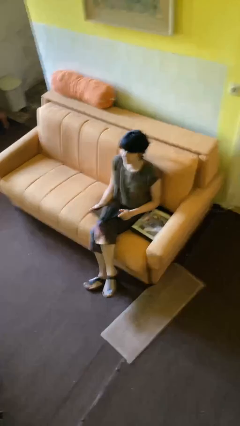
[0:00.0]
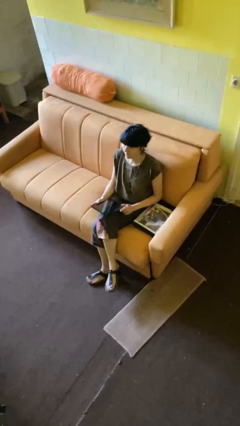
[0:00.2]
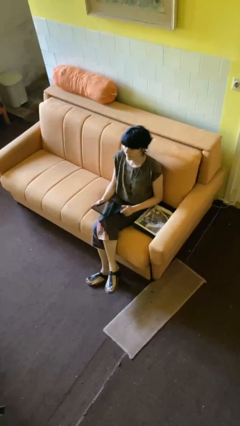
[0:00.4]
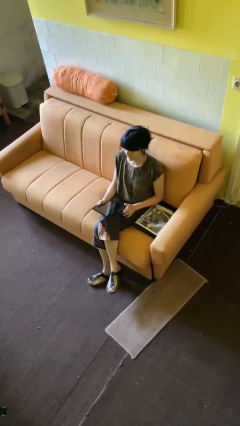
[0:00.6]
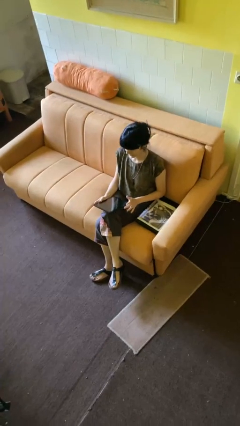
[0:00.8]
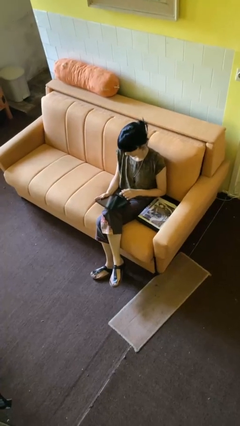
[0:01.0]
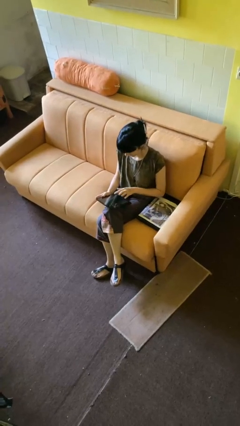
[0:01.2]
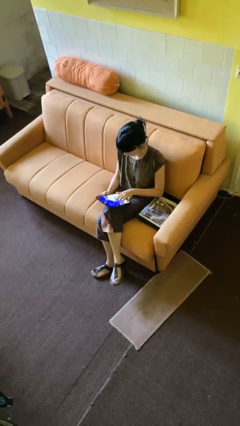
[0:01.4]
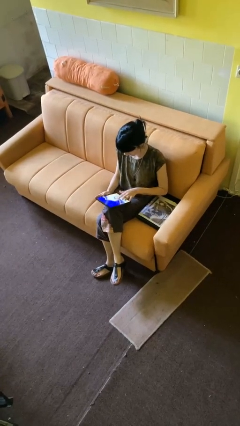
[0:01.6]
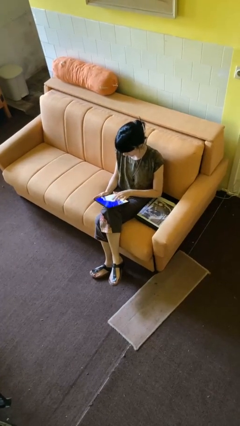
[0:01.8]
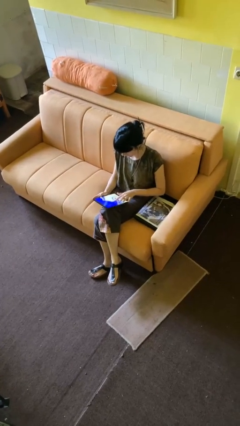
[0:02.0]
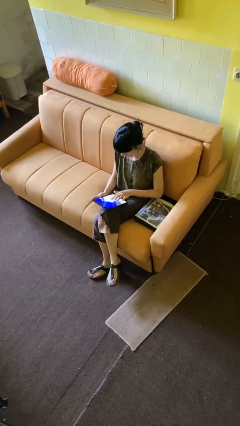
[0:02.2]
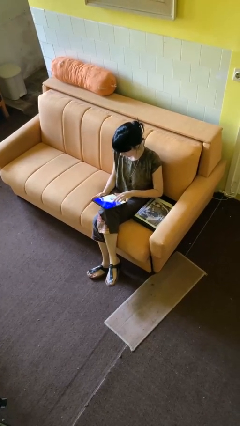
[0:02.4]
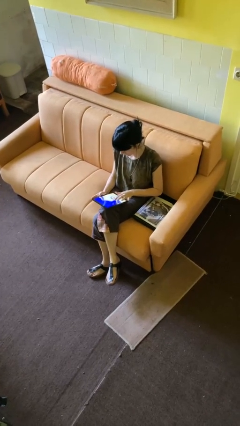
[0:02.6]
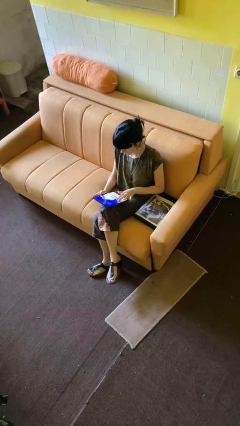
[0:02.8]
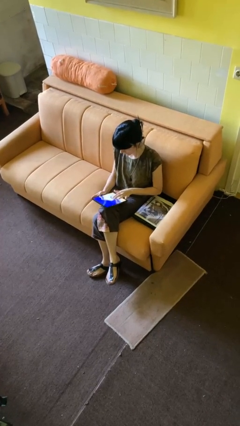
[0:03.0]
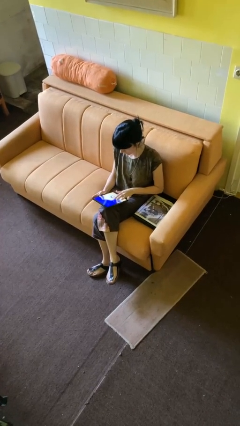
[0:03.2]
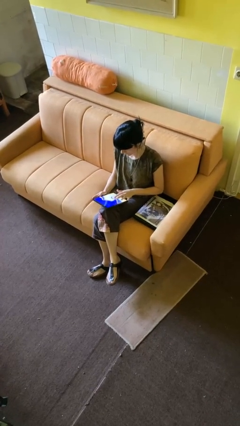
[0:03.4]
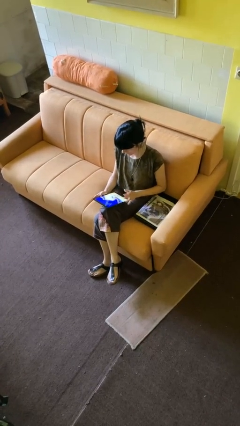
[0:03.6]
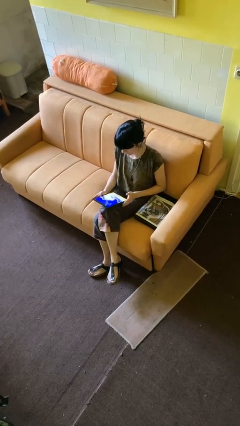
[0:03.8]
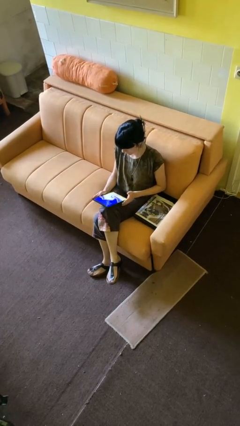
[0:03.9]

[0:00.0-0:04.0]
person interacts with tablet

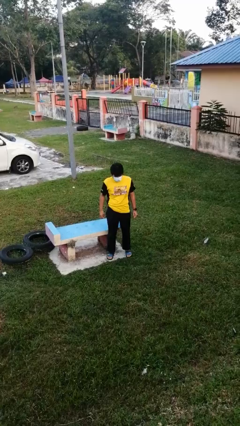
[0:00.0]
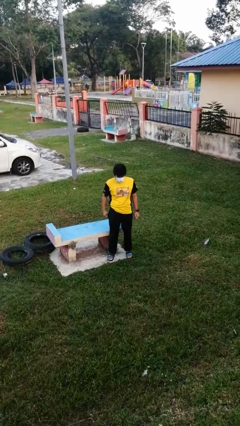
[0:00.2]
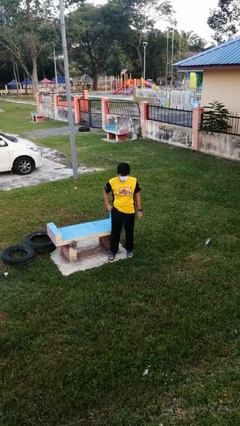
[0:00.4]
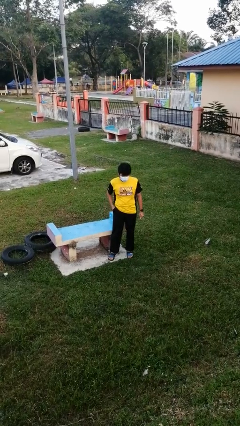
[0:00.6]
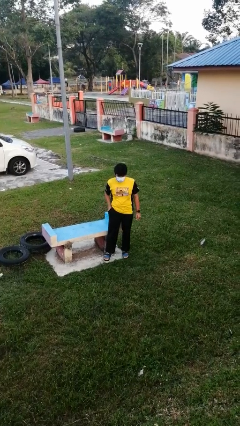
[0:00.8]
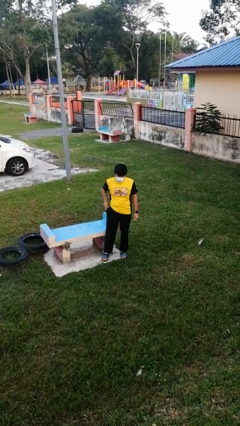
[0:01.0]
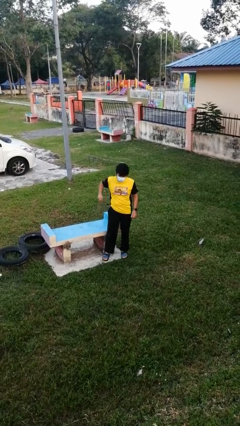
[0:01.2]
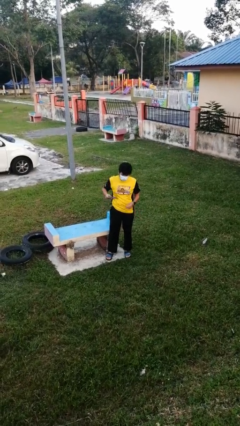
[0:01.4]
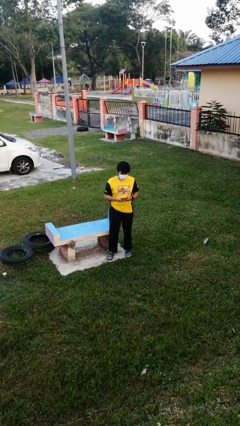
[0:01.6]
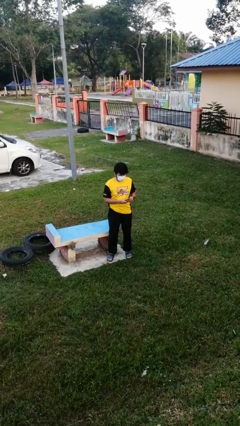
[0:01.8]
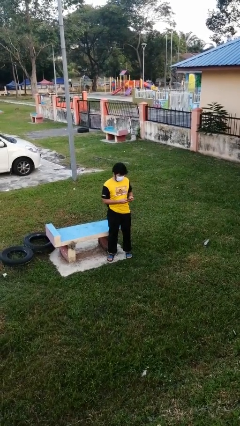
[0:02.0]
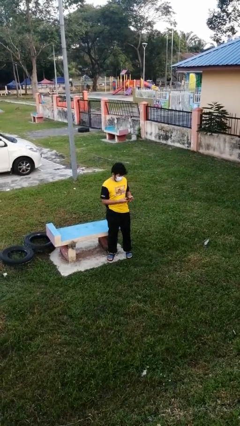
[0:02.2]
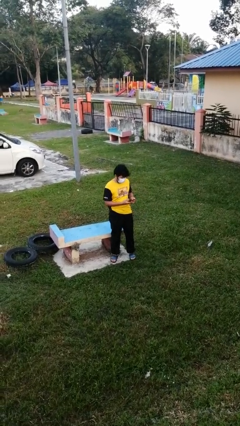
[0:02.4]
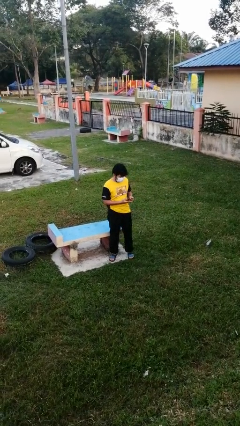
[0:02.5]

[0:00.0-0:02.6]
person takes phone from pocket

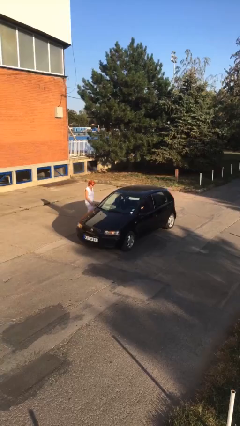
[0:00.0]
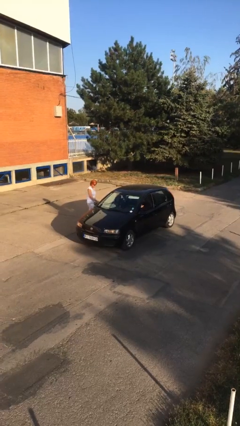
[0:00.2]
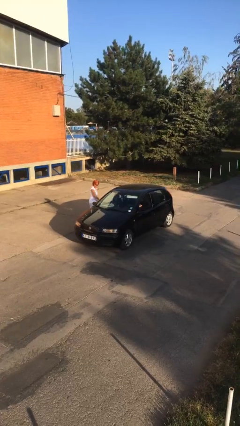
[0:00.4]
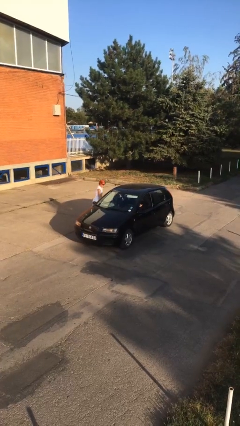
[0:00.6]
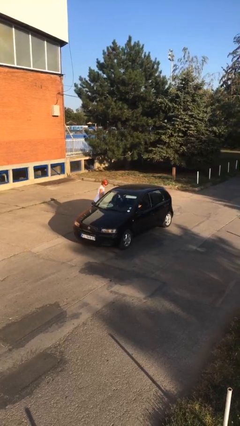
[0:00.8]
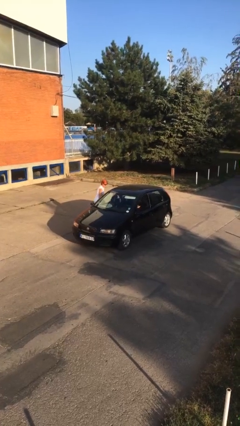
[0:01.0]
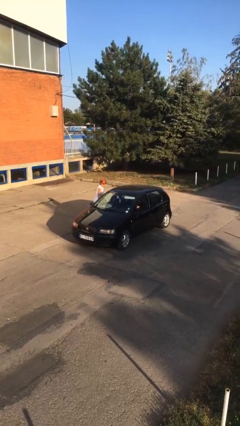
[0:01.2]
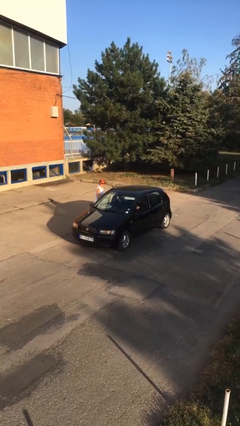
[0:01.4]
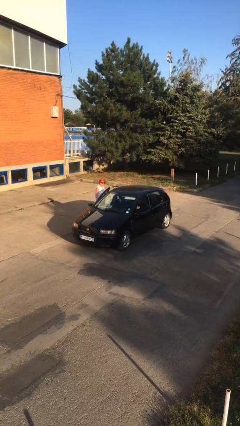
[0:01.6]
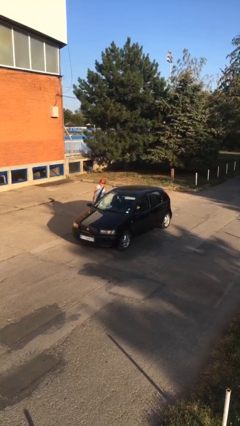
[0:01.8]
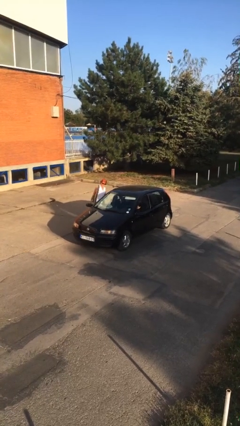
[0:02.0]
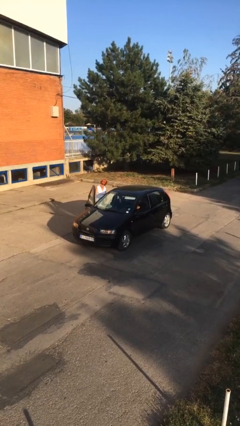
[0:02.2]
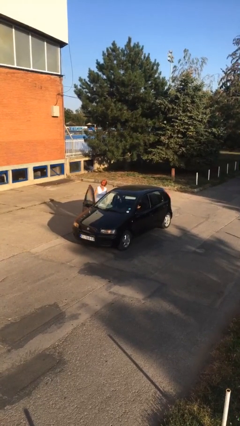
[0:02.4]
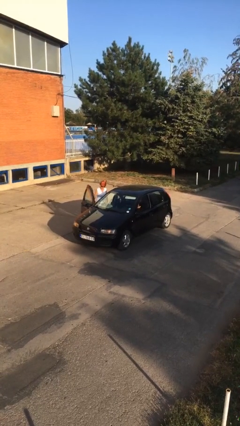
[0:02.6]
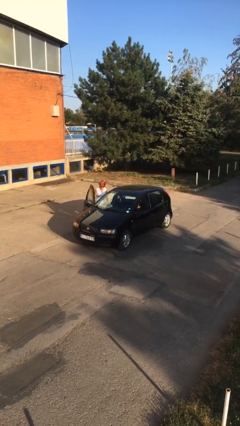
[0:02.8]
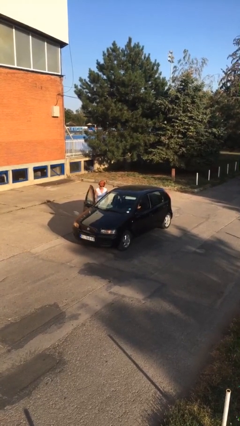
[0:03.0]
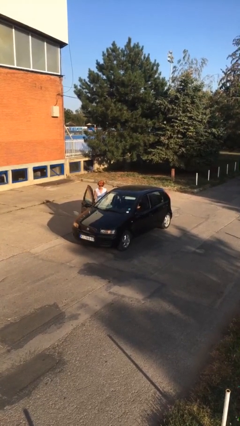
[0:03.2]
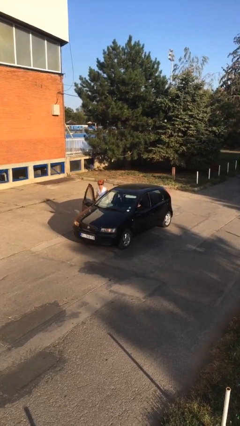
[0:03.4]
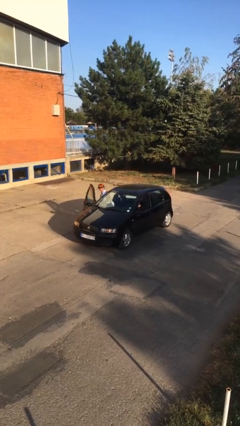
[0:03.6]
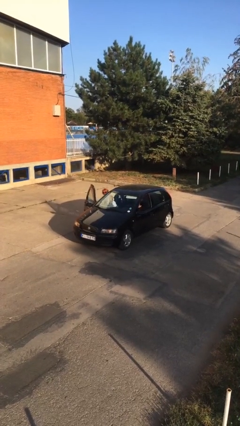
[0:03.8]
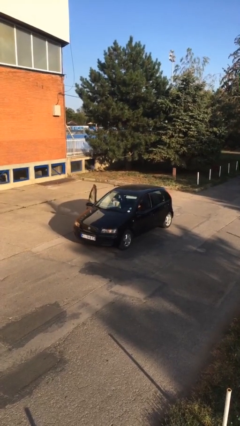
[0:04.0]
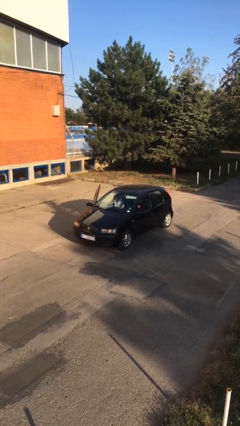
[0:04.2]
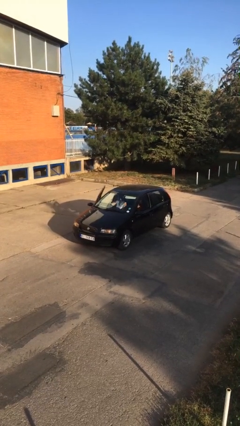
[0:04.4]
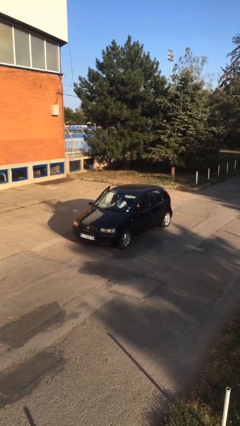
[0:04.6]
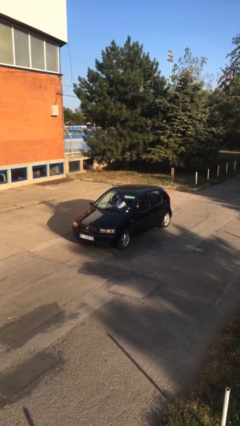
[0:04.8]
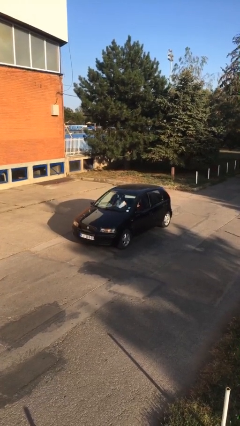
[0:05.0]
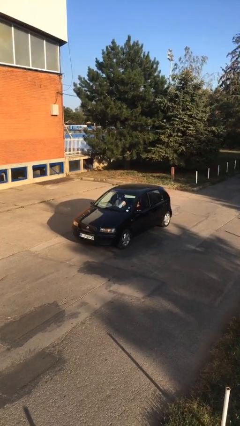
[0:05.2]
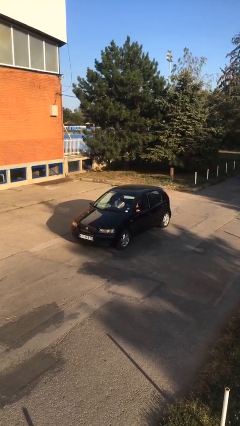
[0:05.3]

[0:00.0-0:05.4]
car picks up person

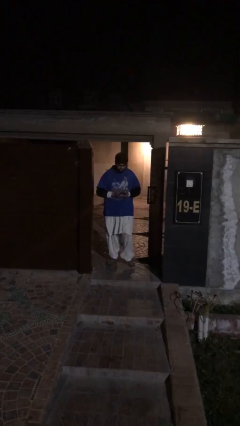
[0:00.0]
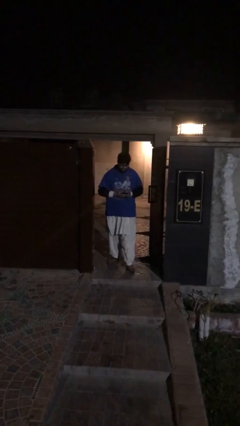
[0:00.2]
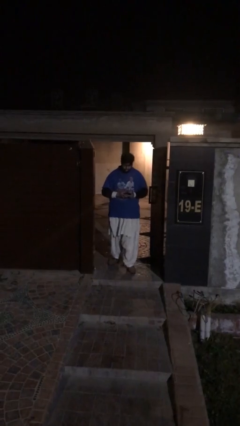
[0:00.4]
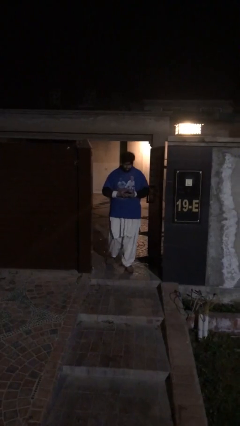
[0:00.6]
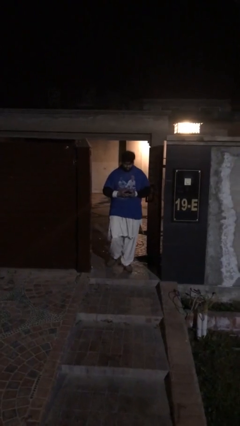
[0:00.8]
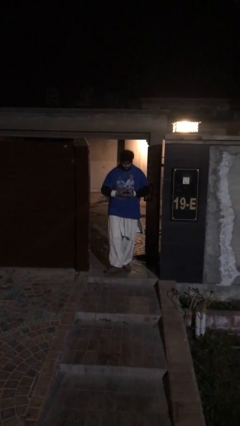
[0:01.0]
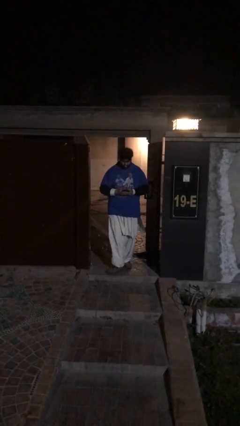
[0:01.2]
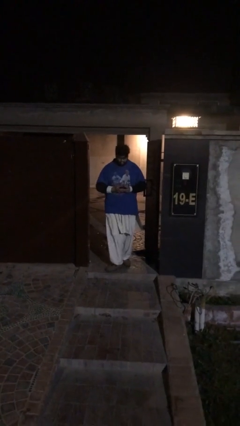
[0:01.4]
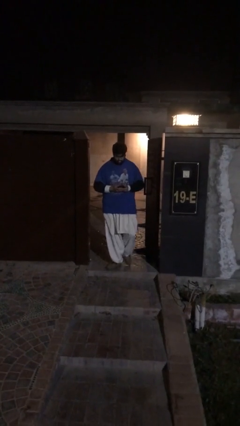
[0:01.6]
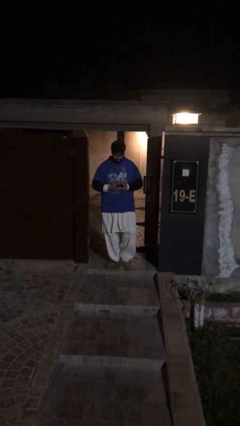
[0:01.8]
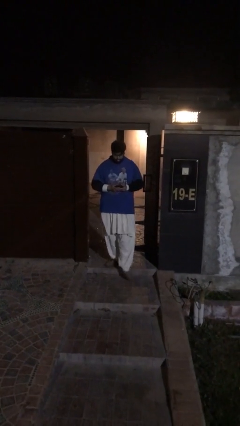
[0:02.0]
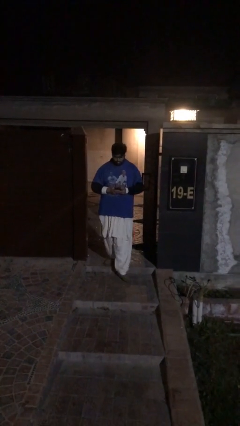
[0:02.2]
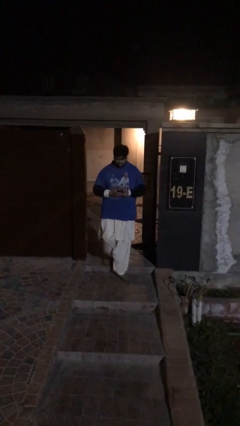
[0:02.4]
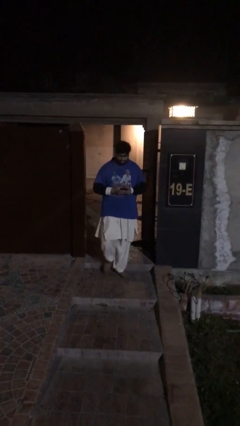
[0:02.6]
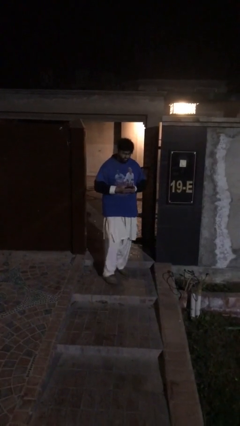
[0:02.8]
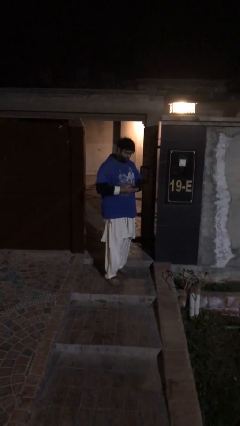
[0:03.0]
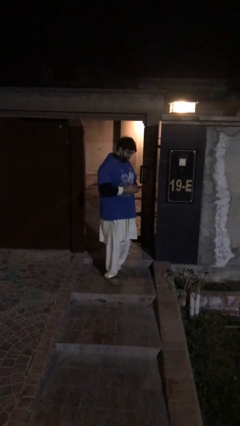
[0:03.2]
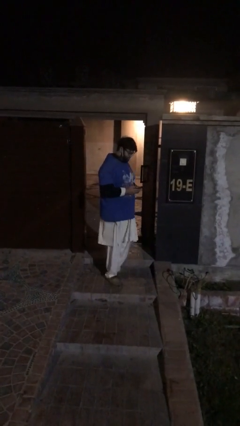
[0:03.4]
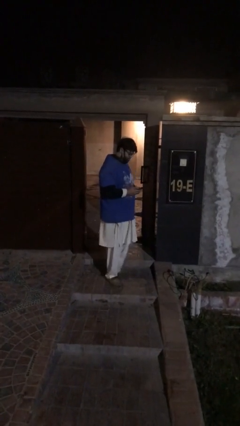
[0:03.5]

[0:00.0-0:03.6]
person enters scene through structure

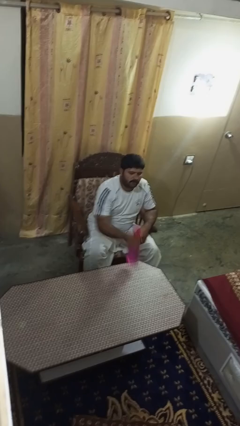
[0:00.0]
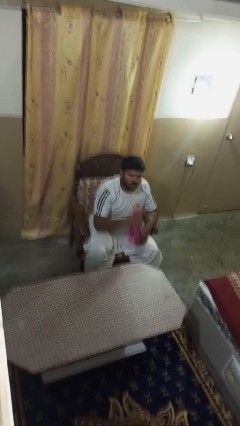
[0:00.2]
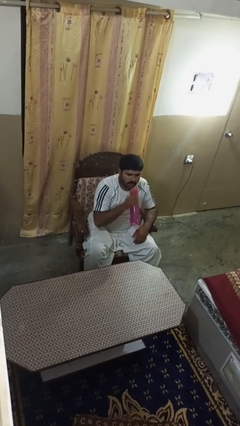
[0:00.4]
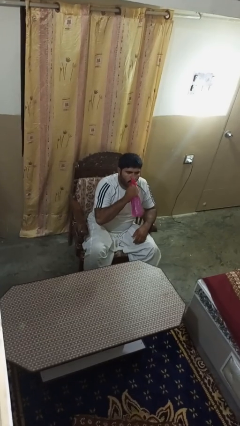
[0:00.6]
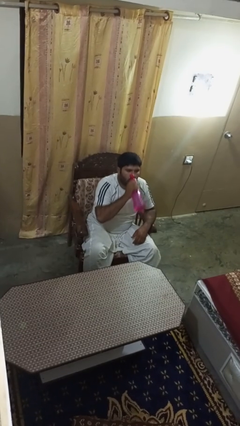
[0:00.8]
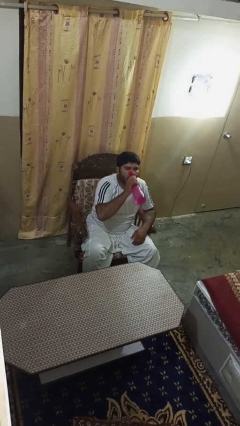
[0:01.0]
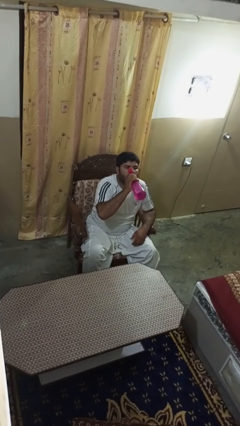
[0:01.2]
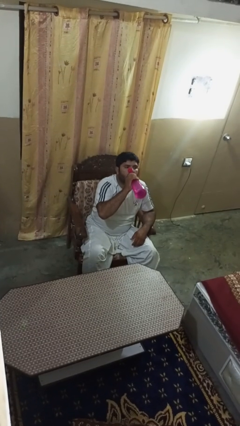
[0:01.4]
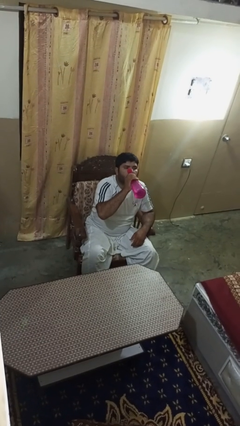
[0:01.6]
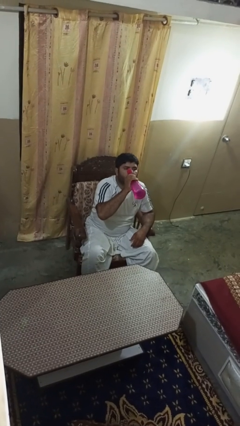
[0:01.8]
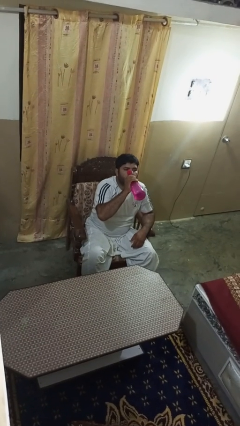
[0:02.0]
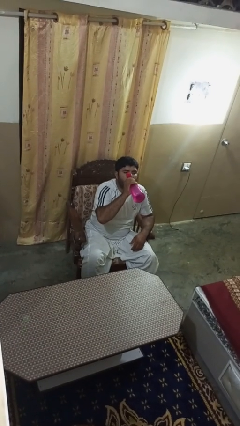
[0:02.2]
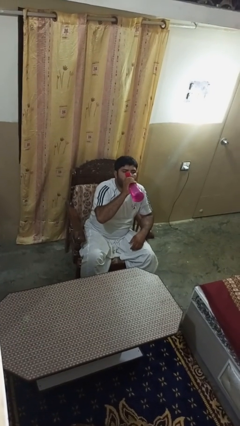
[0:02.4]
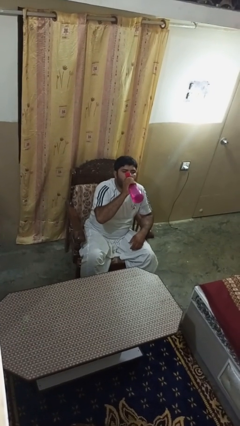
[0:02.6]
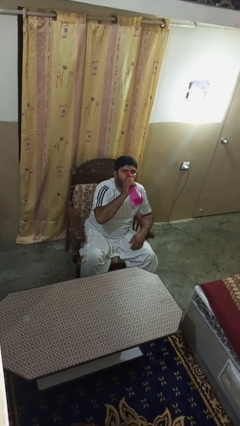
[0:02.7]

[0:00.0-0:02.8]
person drinks from bottle
